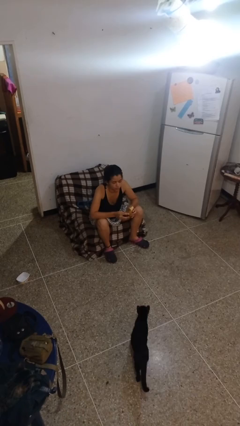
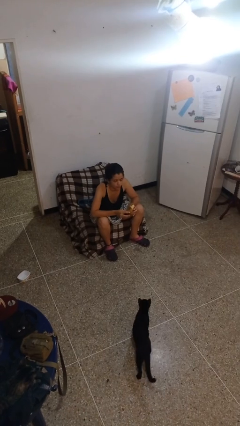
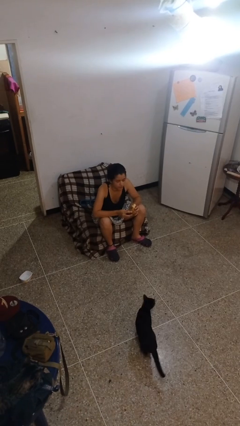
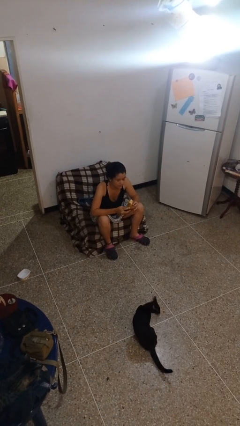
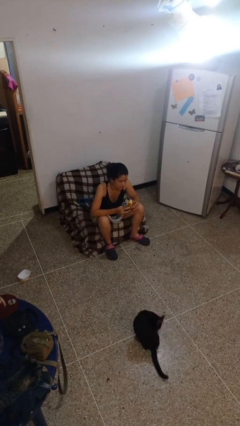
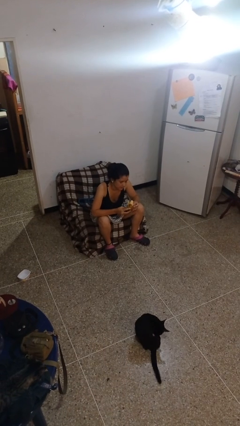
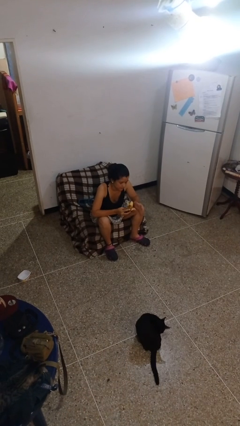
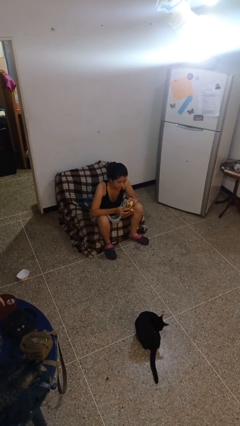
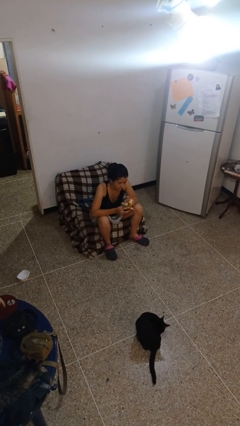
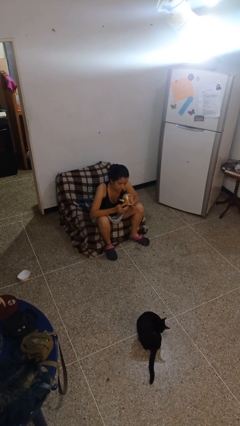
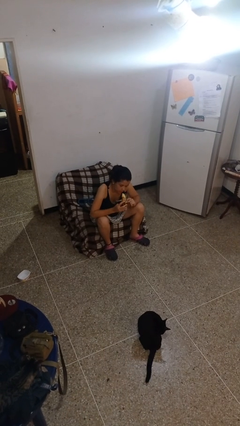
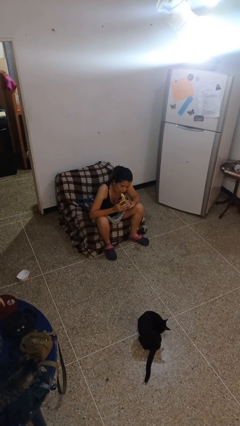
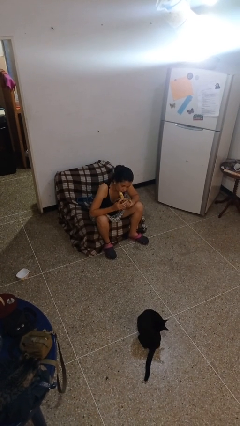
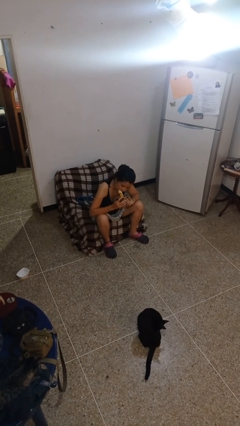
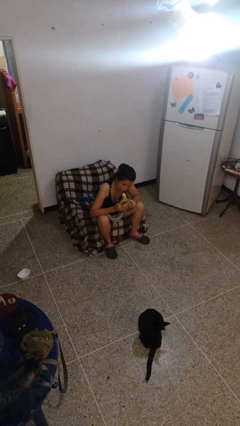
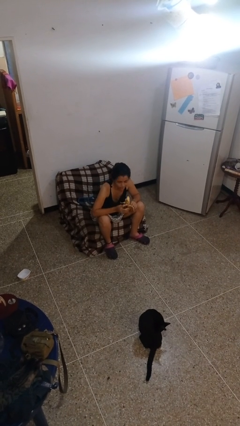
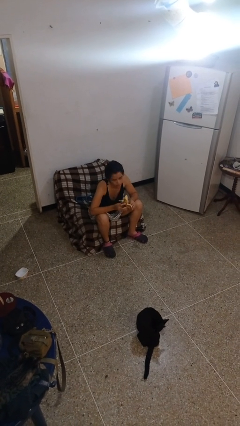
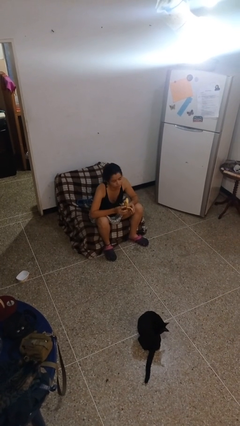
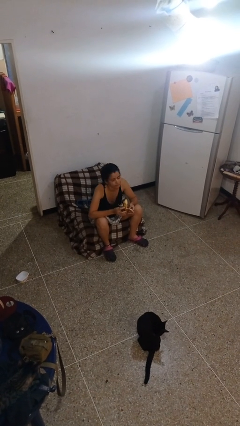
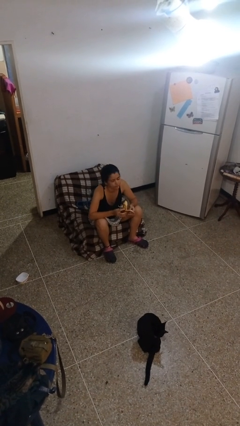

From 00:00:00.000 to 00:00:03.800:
person eats banana

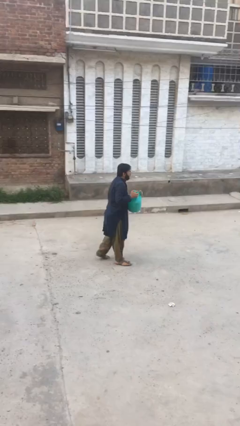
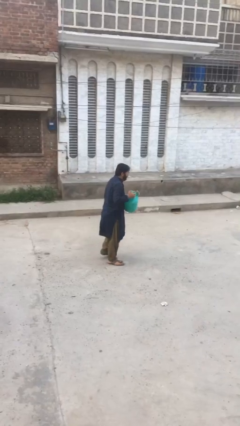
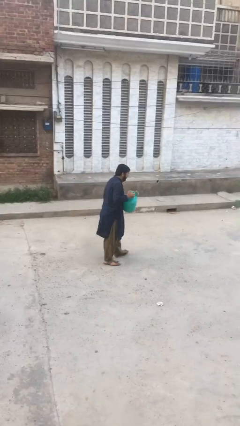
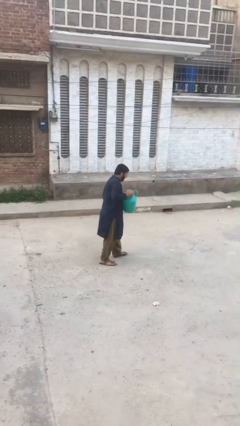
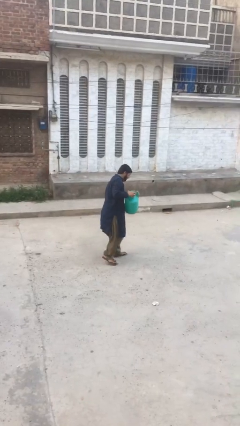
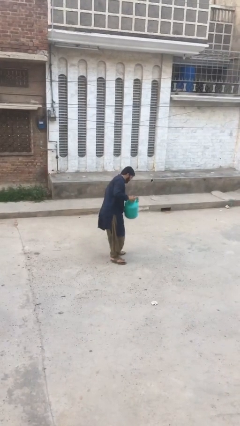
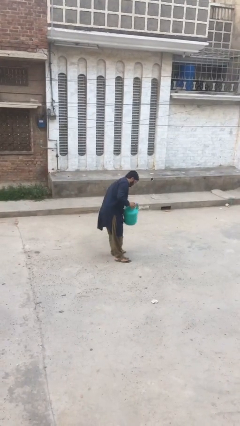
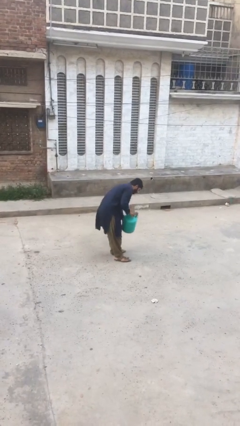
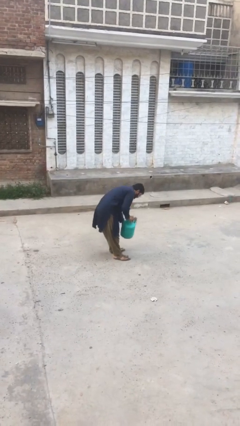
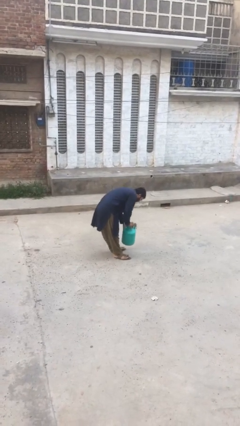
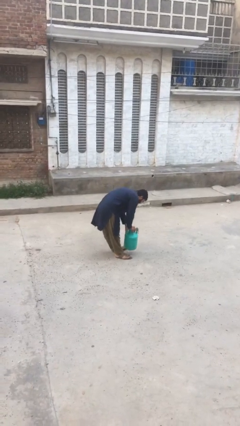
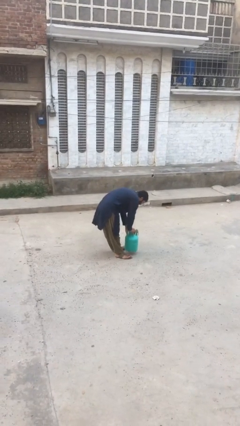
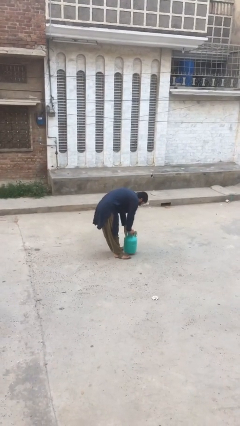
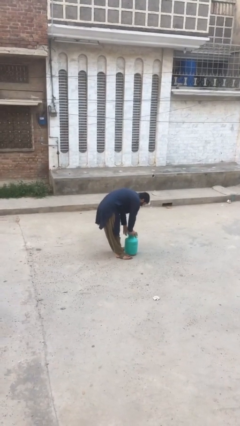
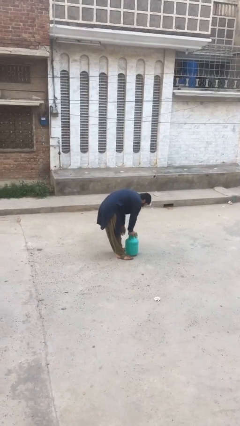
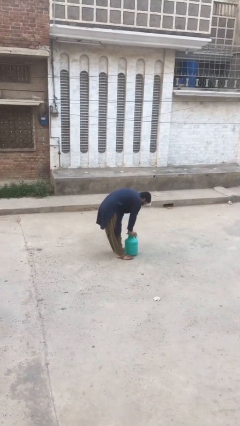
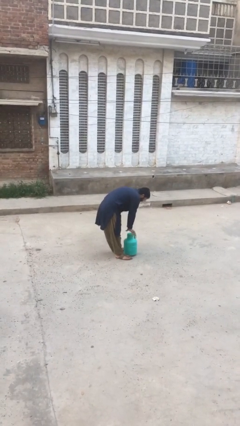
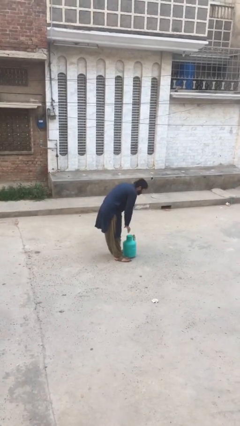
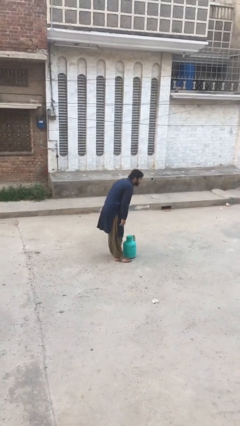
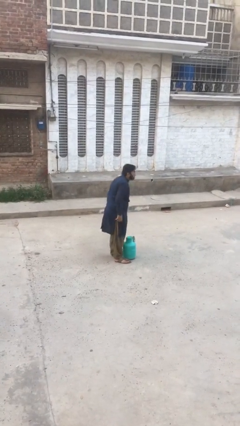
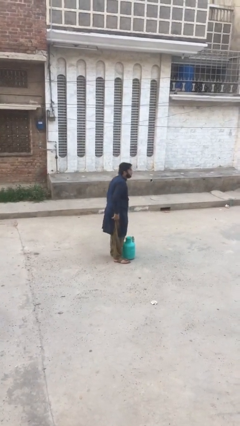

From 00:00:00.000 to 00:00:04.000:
person puts down object on floor

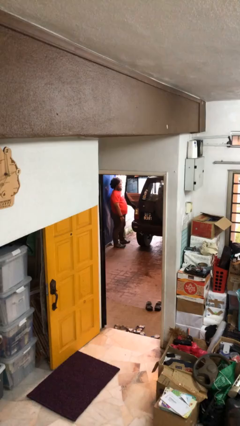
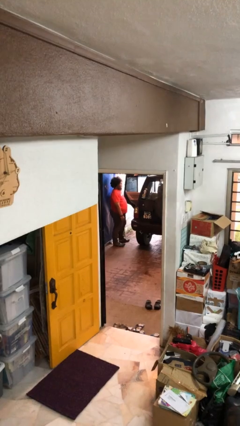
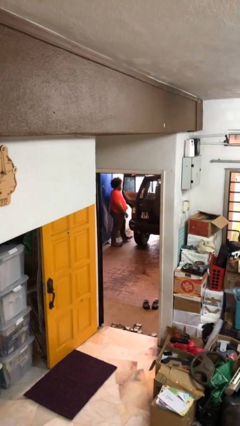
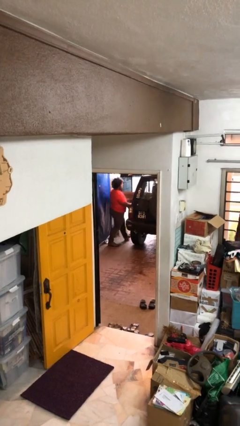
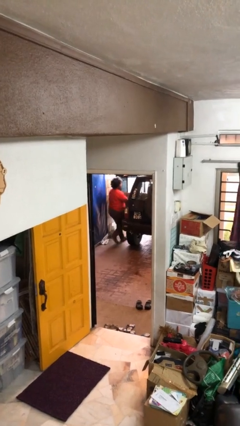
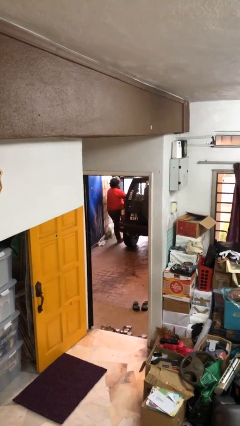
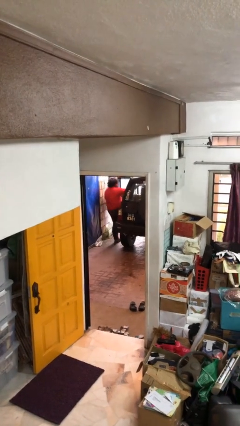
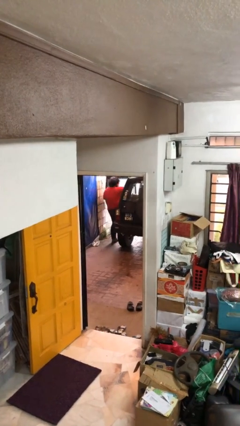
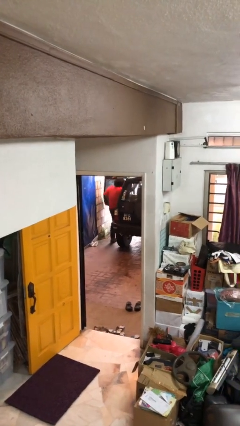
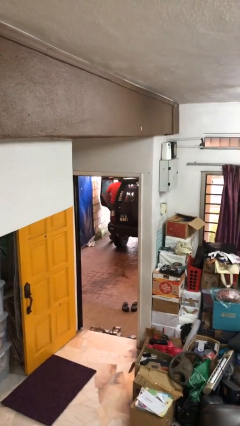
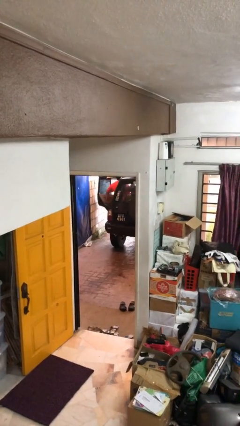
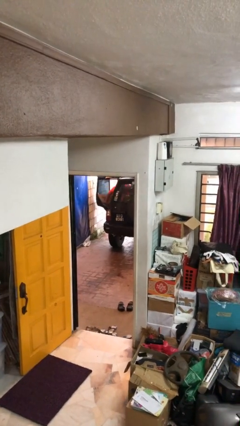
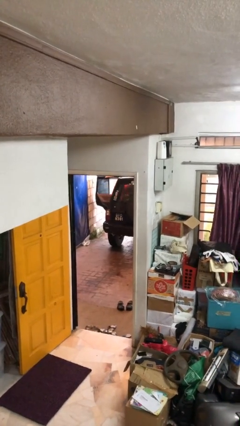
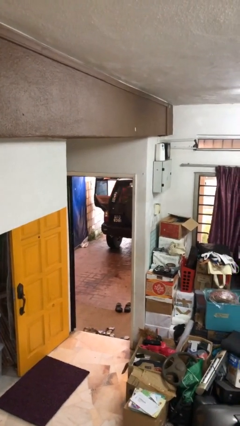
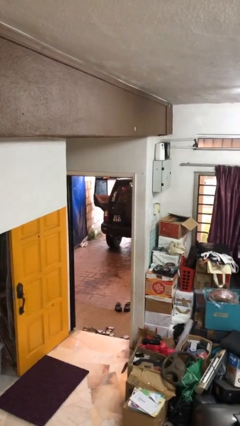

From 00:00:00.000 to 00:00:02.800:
person enters car

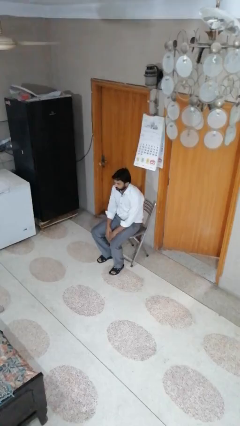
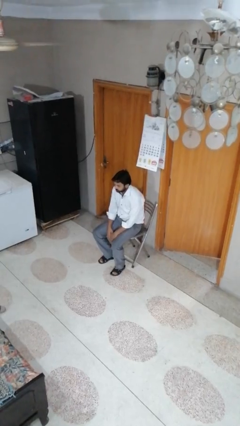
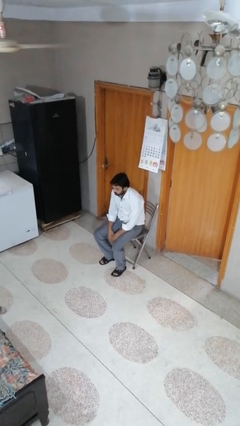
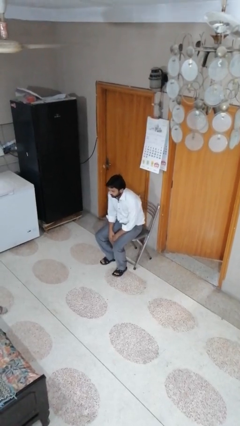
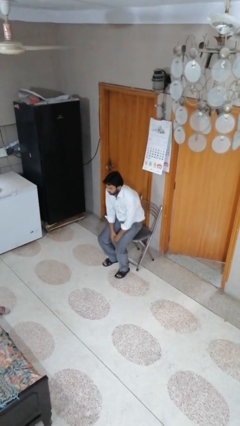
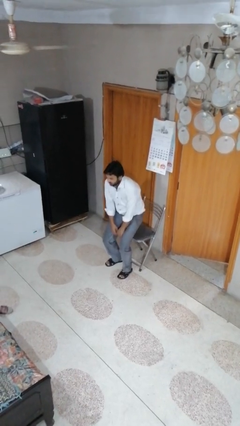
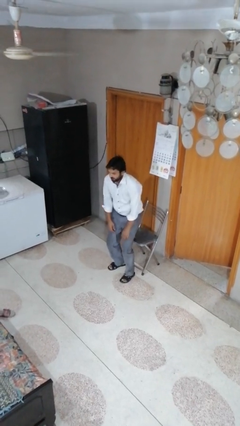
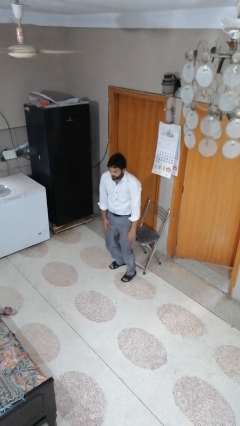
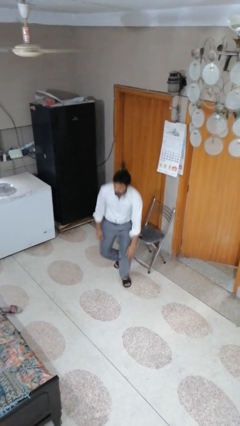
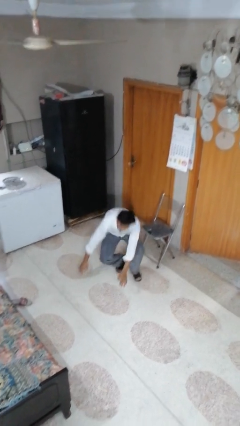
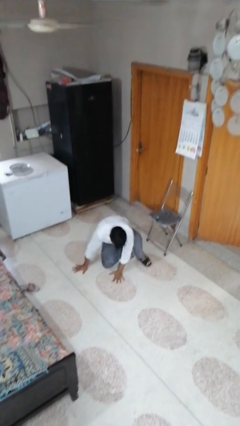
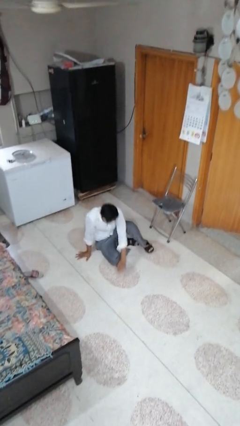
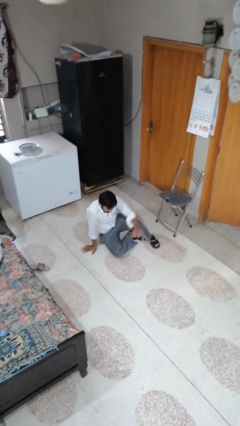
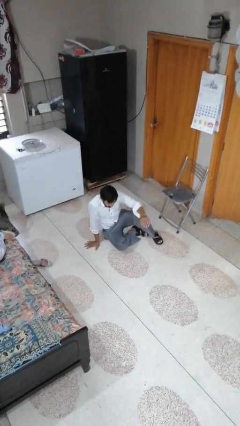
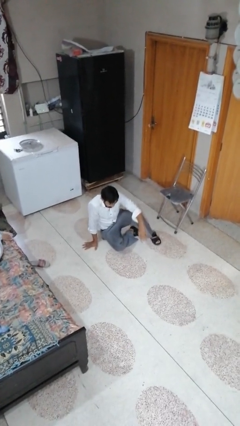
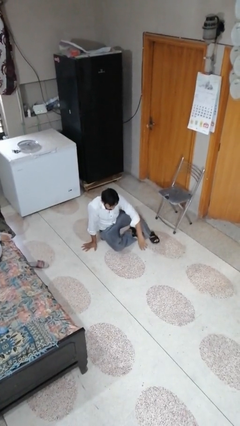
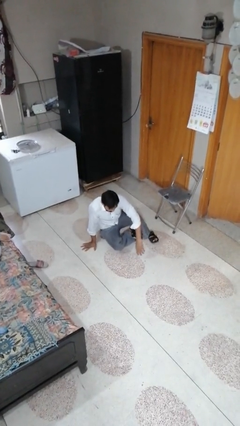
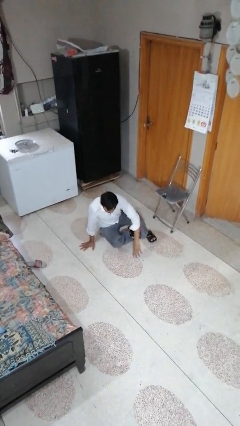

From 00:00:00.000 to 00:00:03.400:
person falls from chair

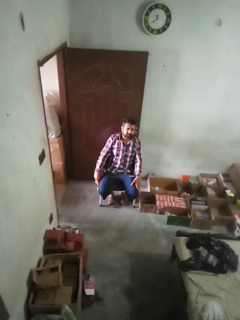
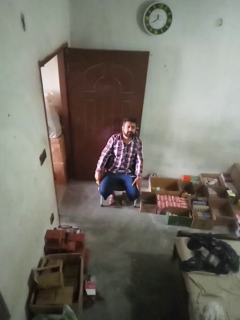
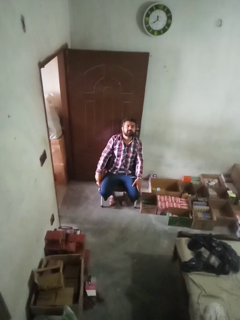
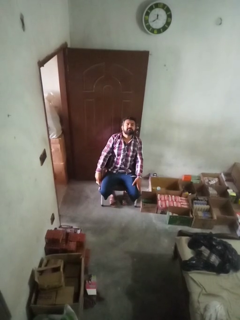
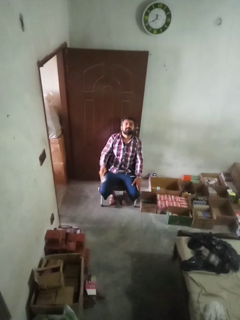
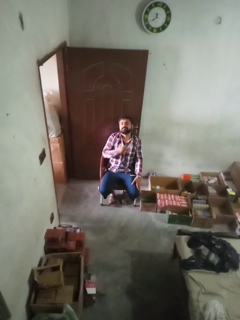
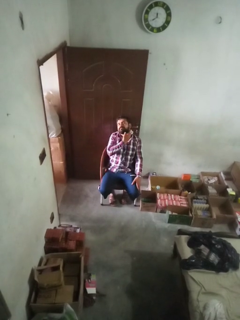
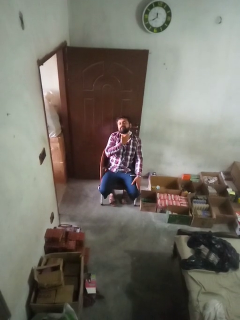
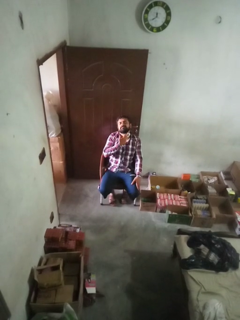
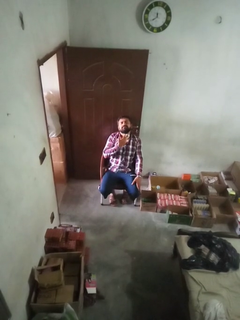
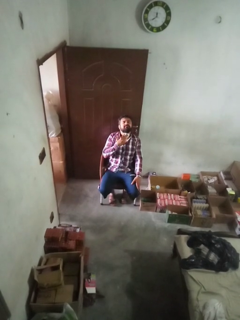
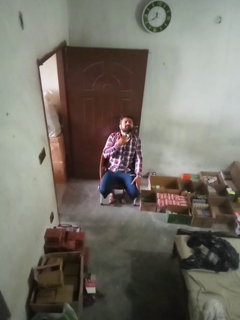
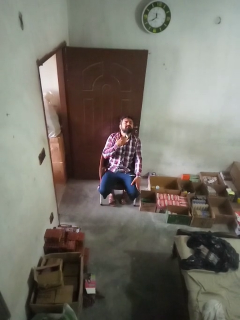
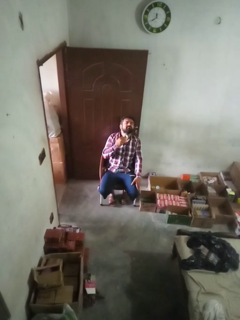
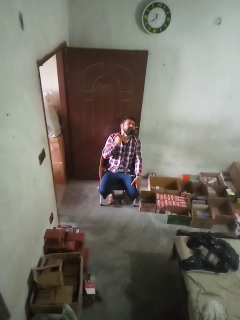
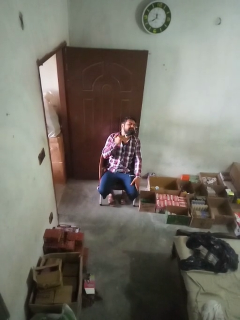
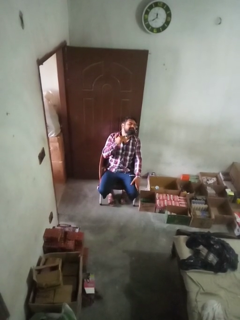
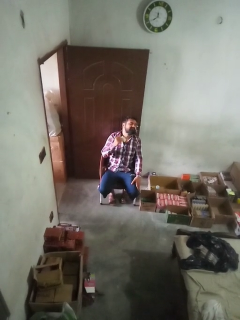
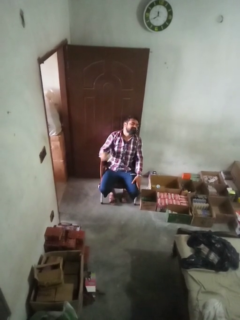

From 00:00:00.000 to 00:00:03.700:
person wipes mouth with napkin

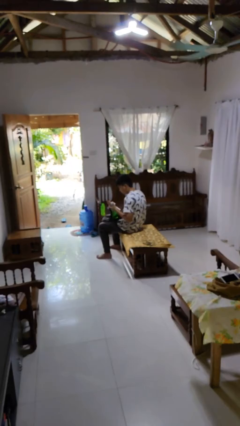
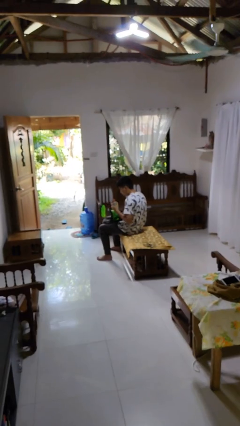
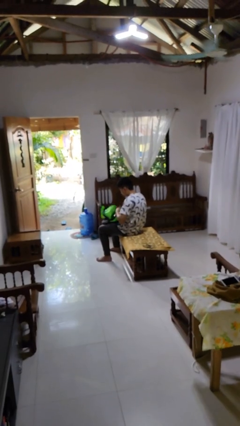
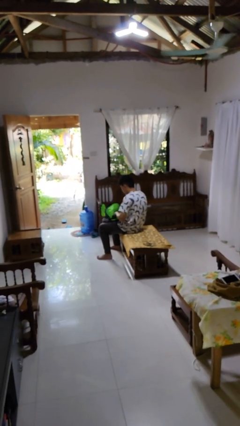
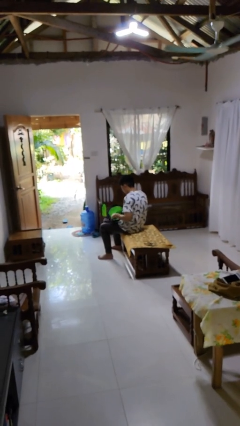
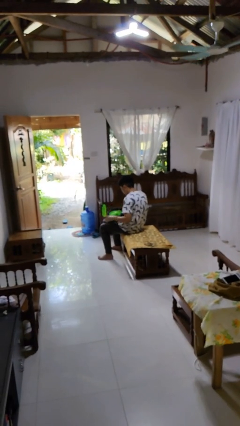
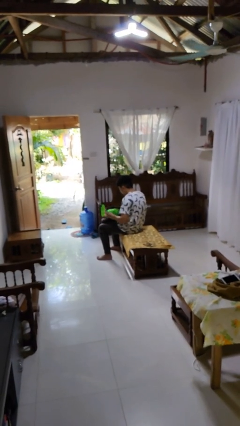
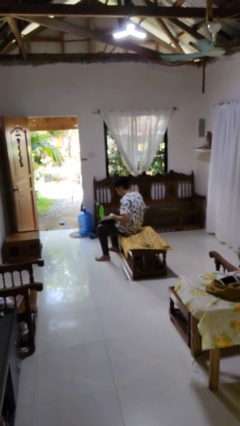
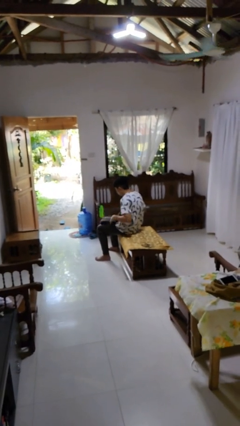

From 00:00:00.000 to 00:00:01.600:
person puts object into backpack
